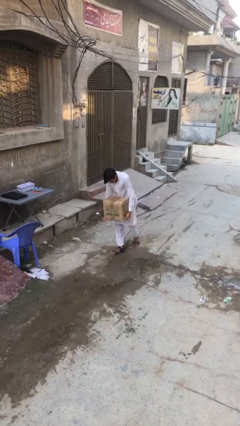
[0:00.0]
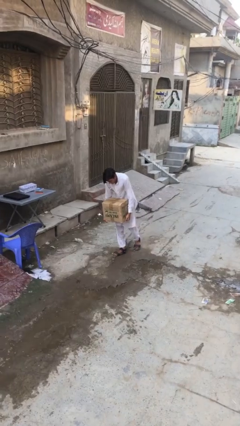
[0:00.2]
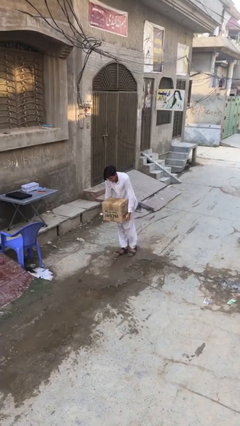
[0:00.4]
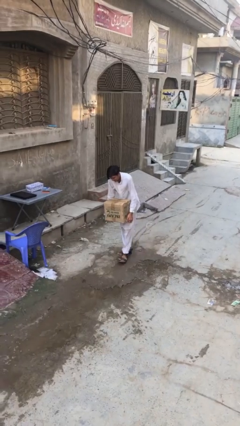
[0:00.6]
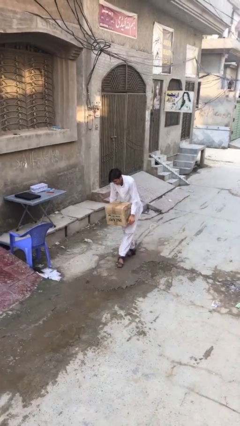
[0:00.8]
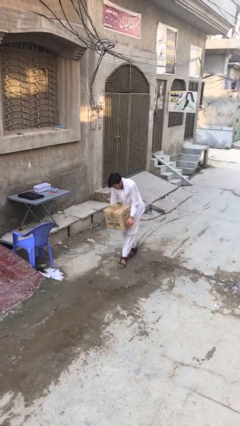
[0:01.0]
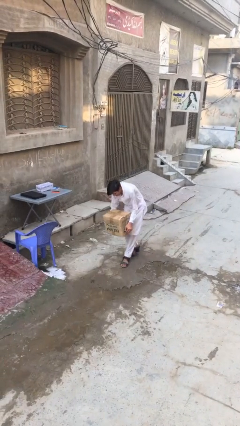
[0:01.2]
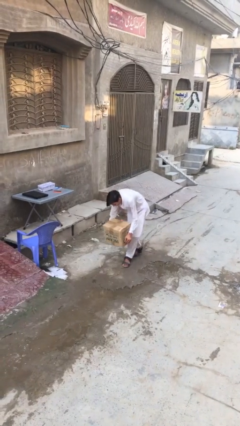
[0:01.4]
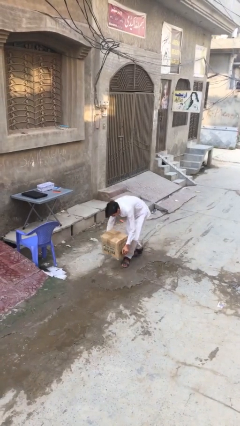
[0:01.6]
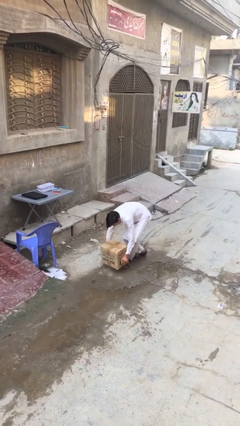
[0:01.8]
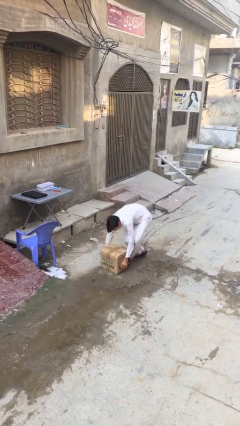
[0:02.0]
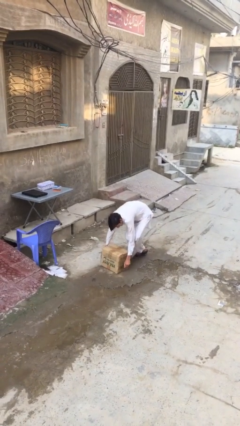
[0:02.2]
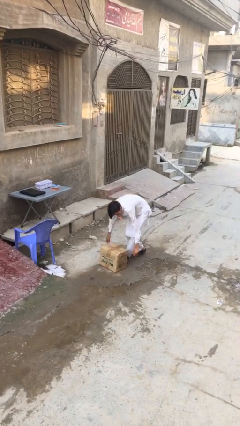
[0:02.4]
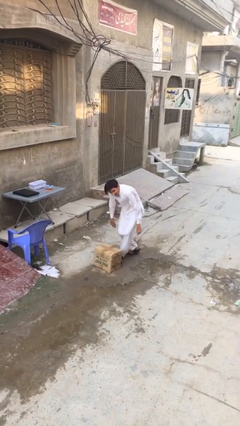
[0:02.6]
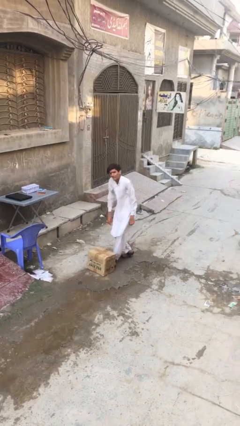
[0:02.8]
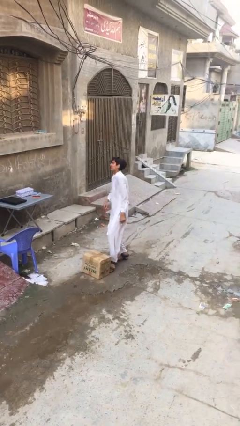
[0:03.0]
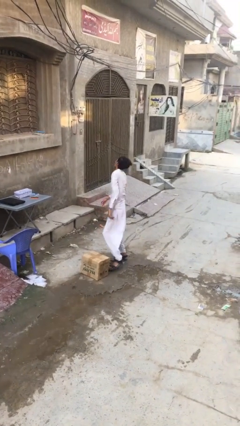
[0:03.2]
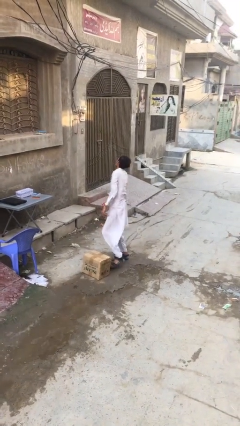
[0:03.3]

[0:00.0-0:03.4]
person puts down object on floor

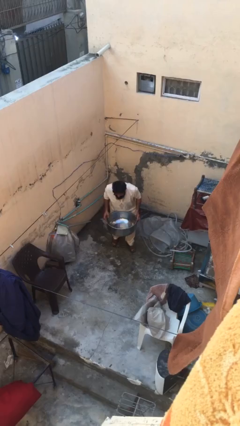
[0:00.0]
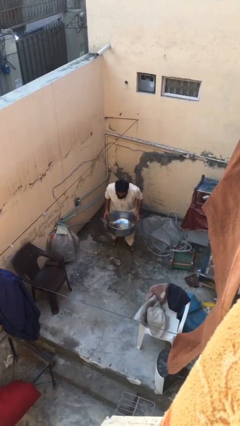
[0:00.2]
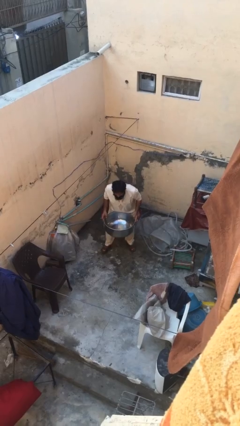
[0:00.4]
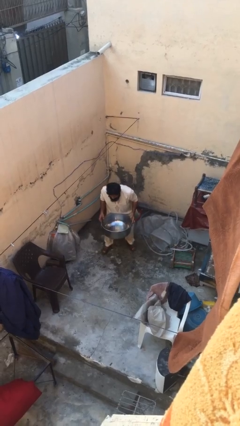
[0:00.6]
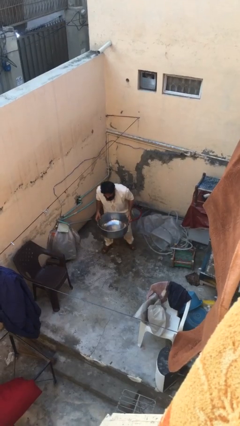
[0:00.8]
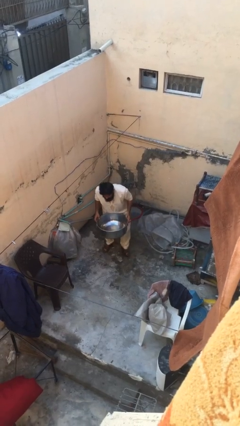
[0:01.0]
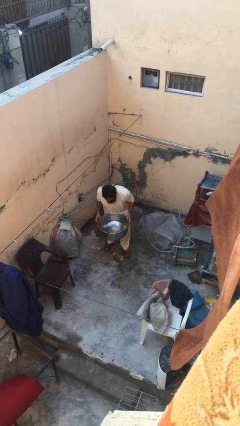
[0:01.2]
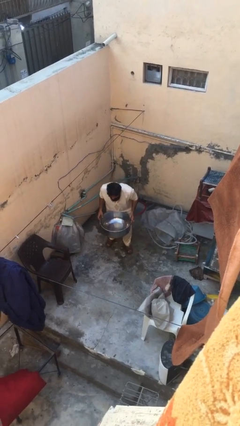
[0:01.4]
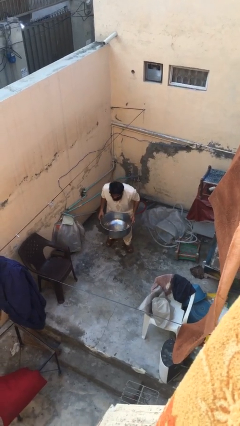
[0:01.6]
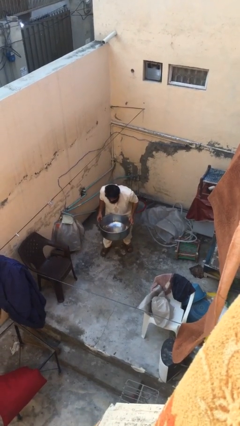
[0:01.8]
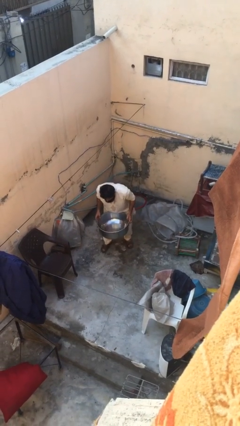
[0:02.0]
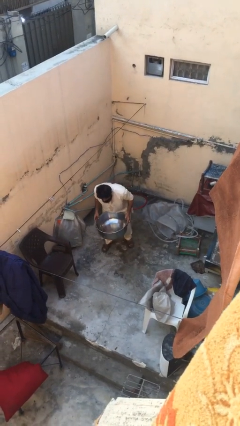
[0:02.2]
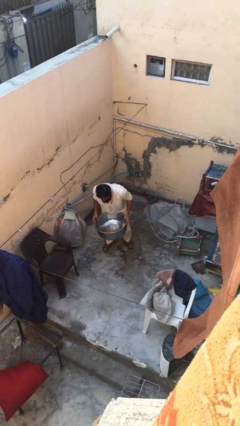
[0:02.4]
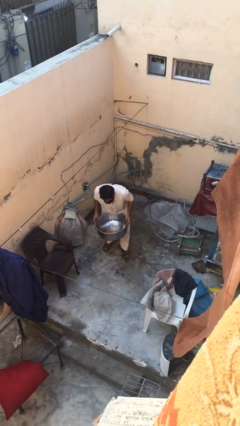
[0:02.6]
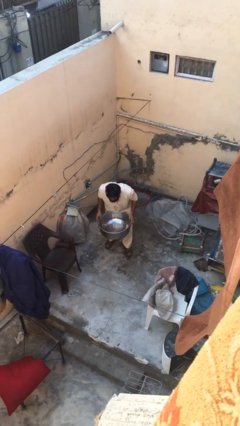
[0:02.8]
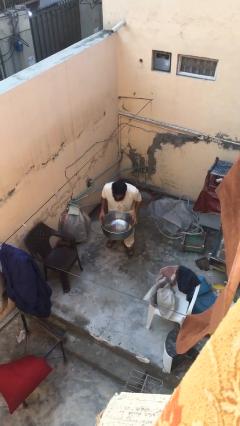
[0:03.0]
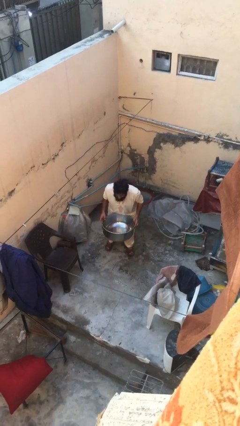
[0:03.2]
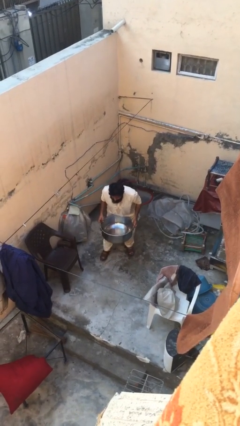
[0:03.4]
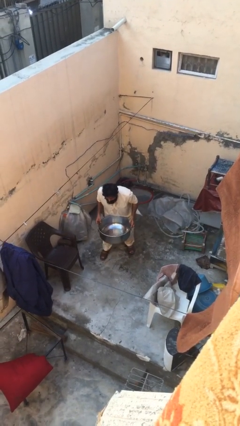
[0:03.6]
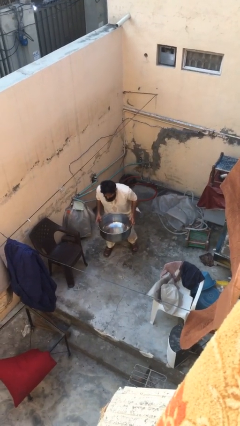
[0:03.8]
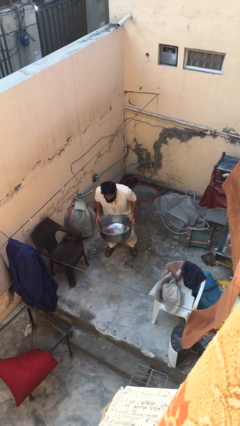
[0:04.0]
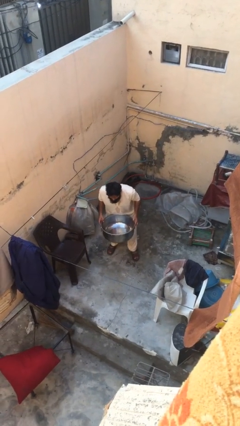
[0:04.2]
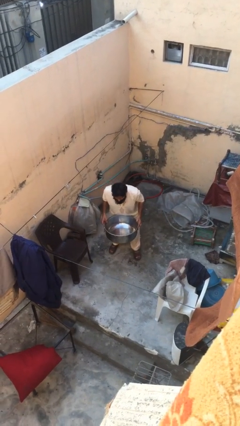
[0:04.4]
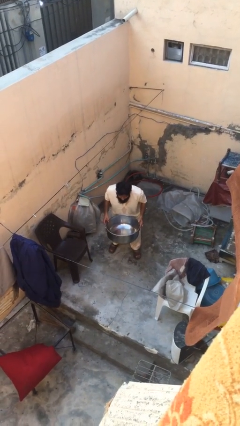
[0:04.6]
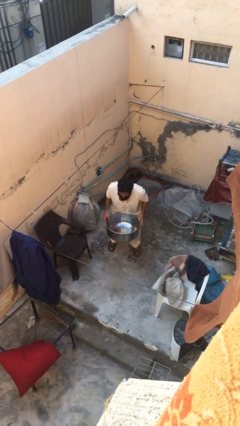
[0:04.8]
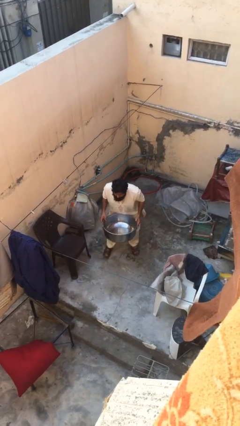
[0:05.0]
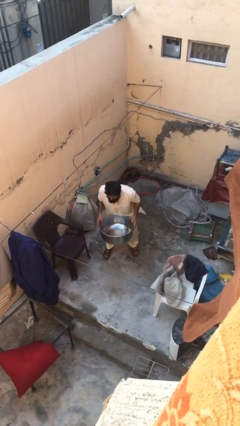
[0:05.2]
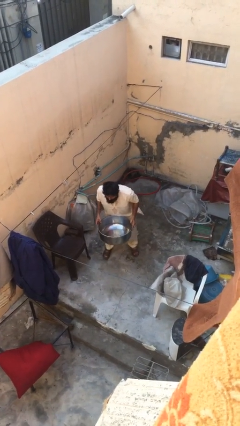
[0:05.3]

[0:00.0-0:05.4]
person carries heavy object

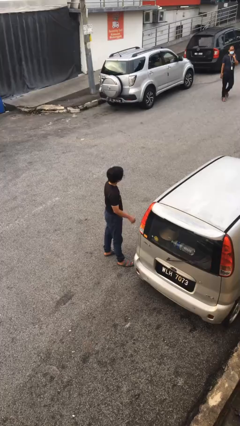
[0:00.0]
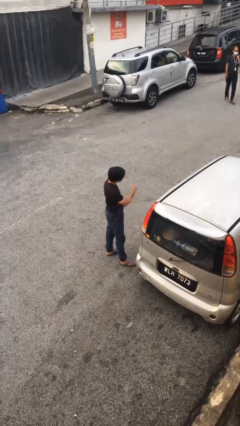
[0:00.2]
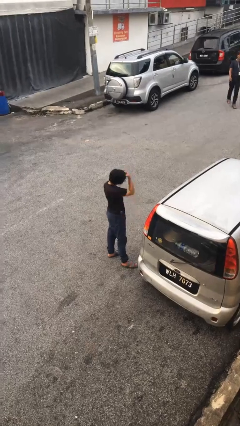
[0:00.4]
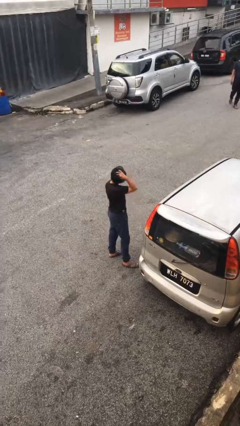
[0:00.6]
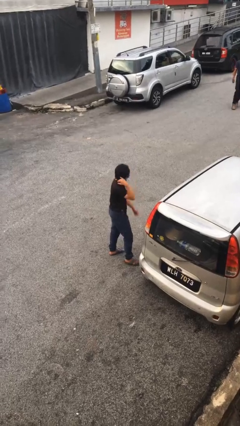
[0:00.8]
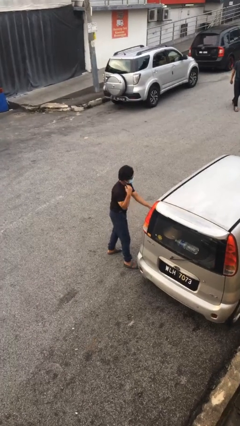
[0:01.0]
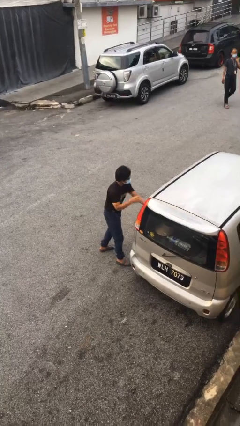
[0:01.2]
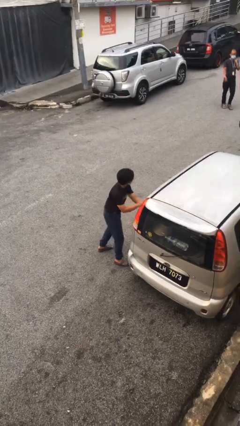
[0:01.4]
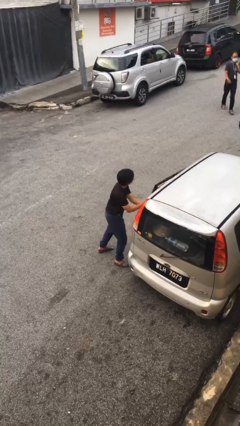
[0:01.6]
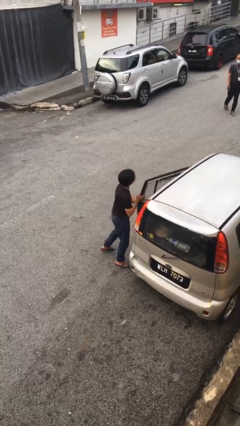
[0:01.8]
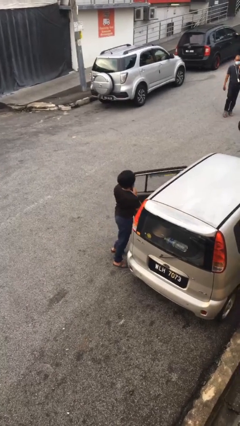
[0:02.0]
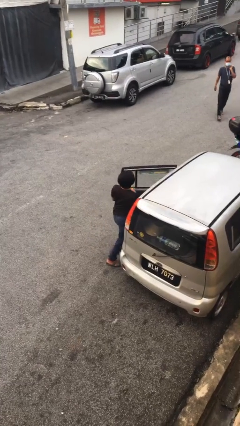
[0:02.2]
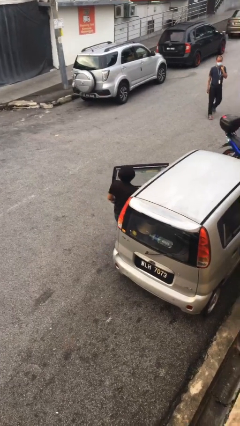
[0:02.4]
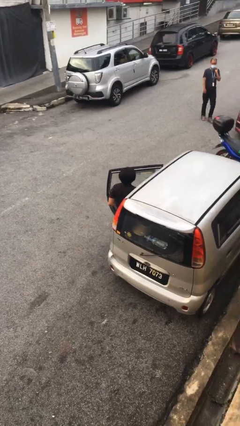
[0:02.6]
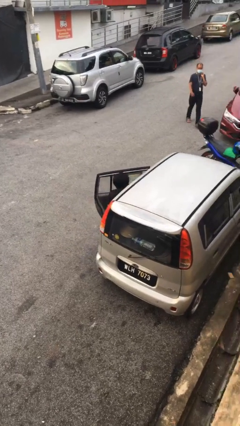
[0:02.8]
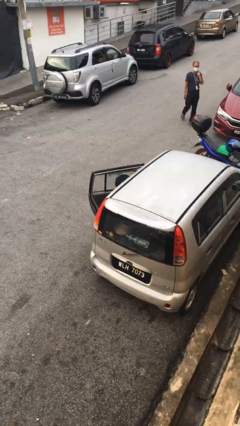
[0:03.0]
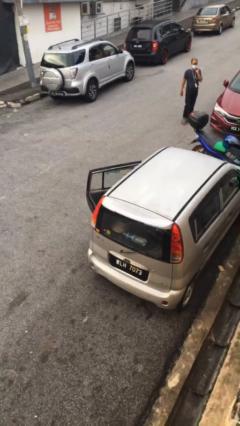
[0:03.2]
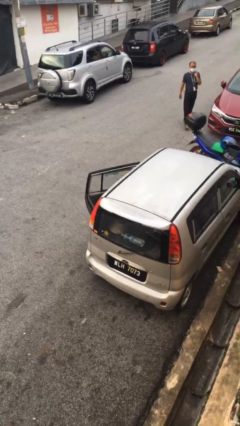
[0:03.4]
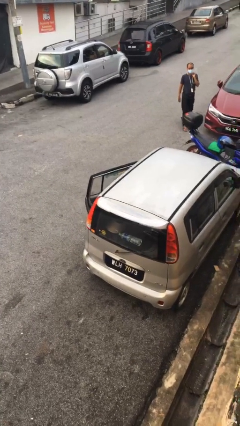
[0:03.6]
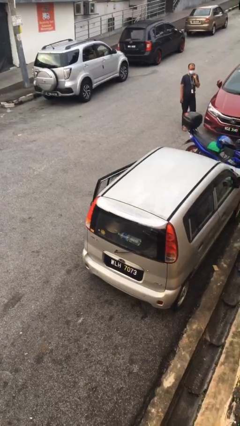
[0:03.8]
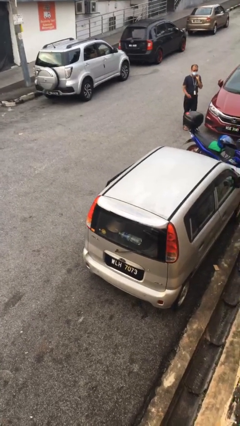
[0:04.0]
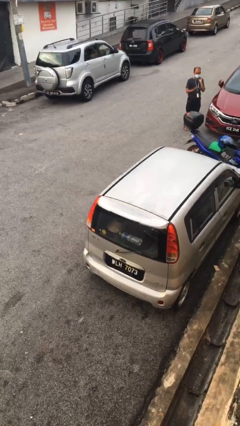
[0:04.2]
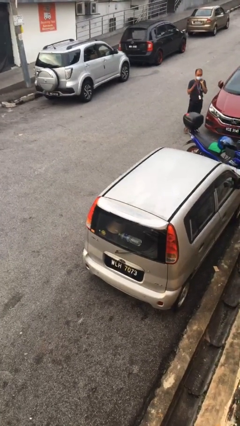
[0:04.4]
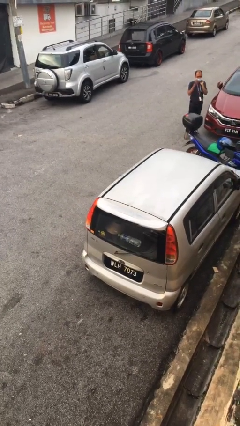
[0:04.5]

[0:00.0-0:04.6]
person enters car

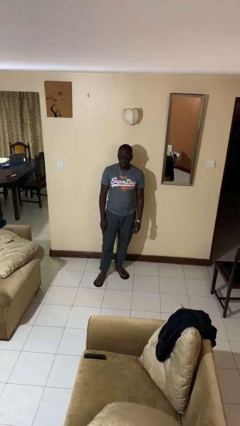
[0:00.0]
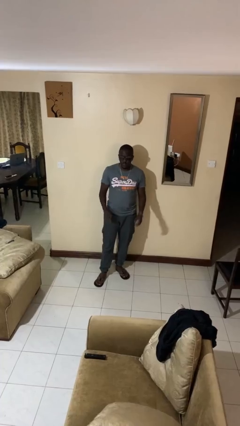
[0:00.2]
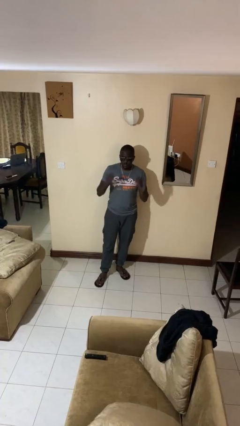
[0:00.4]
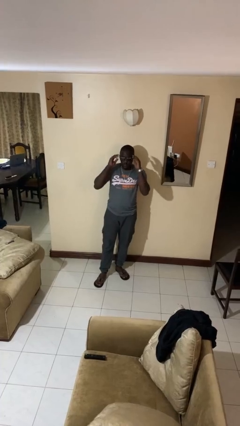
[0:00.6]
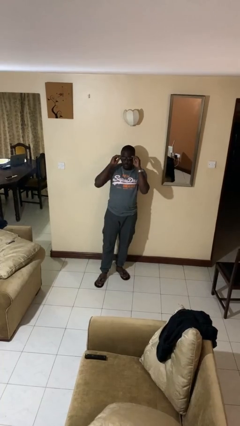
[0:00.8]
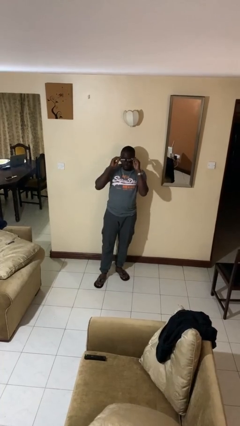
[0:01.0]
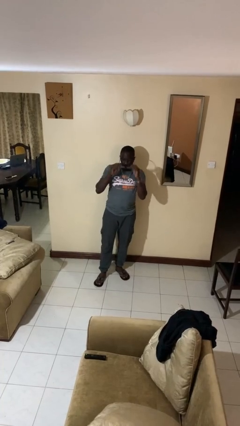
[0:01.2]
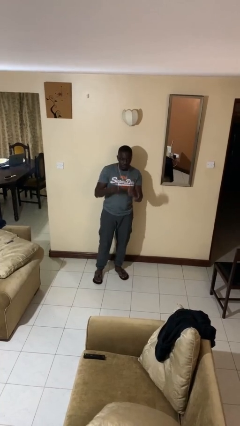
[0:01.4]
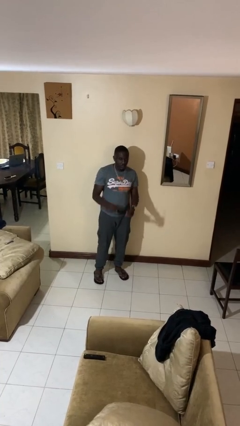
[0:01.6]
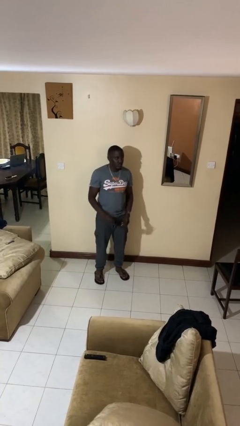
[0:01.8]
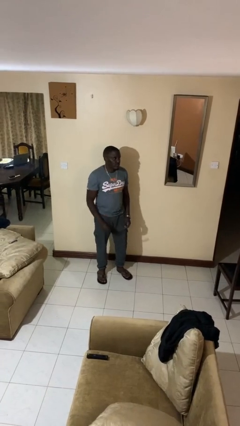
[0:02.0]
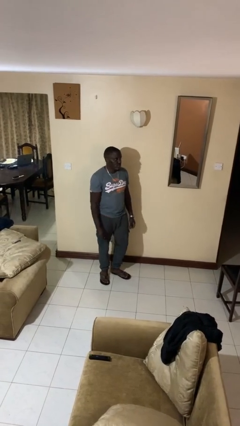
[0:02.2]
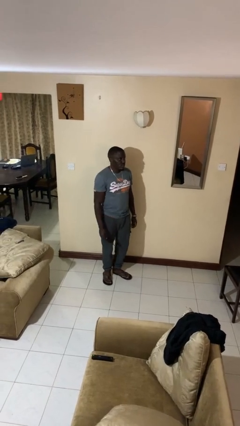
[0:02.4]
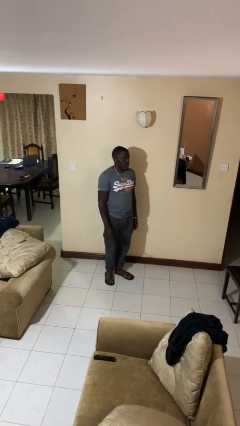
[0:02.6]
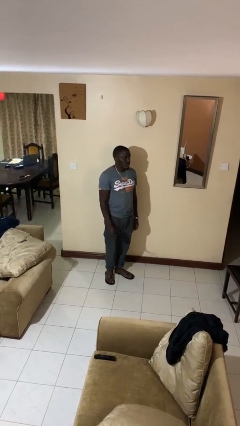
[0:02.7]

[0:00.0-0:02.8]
person takes off sunglasses

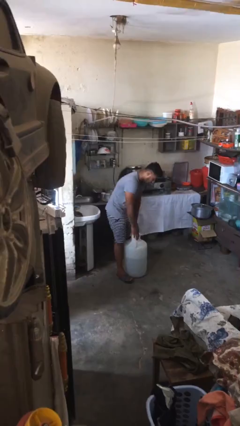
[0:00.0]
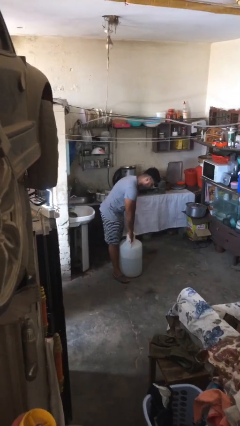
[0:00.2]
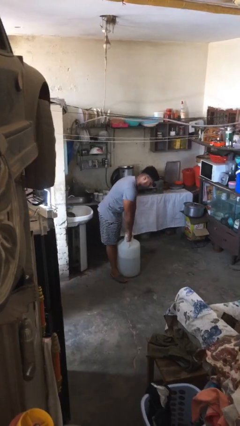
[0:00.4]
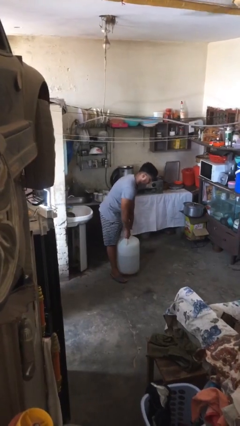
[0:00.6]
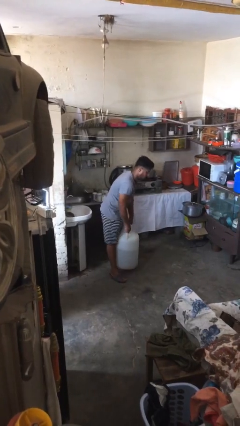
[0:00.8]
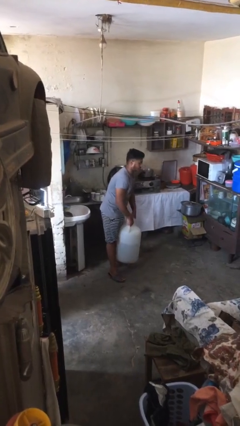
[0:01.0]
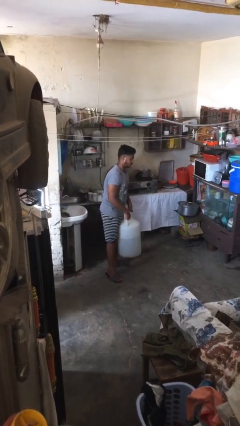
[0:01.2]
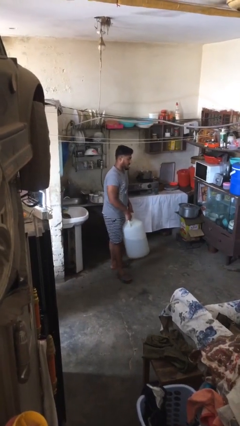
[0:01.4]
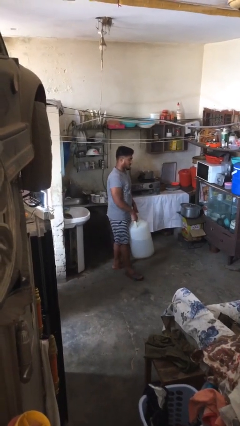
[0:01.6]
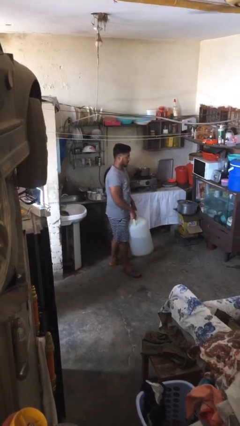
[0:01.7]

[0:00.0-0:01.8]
person picks up object from floor
